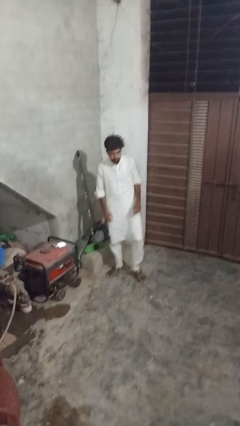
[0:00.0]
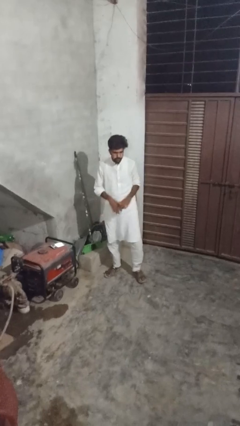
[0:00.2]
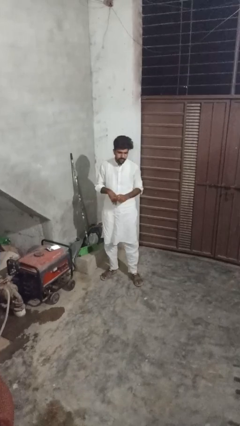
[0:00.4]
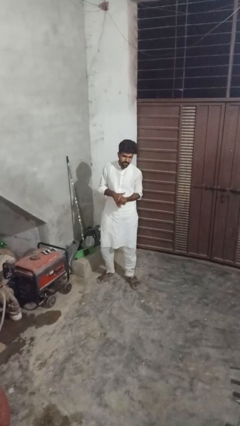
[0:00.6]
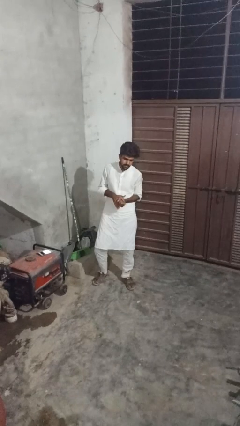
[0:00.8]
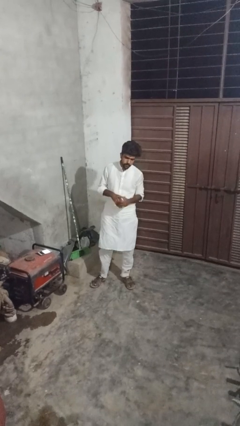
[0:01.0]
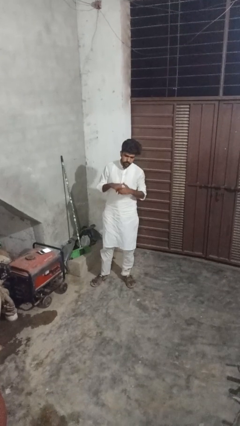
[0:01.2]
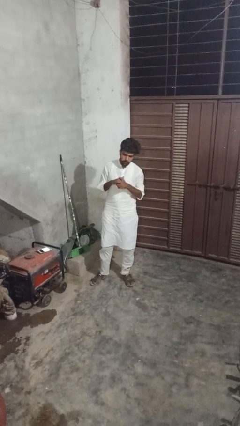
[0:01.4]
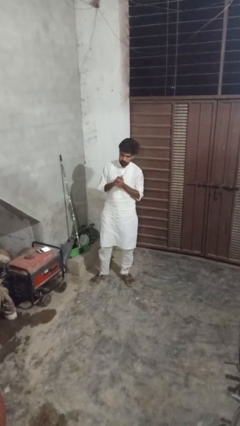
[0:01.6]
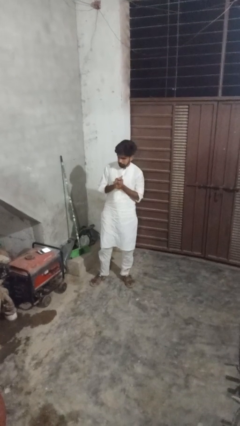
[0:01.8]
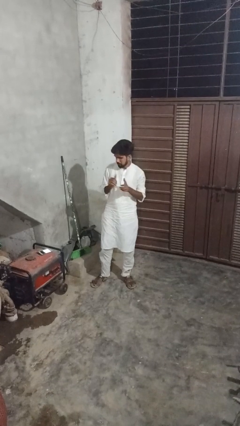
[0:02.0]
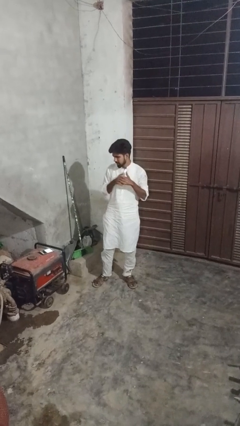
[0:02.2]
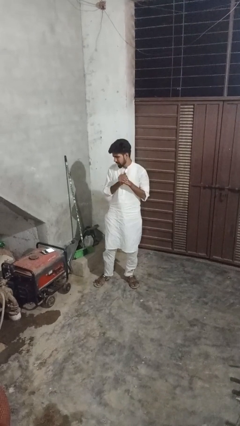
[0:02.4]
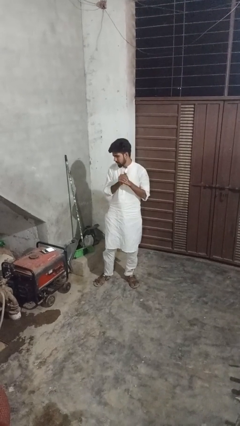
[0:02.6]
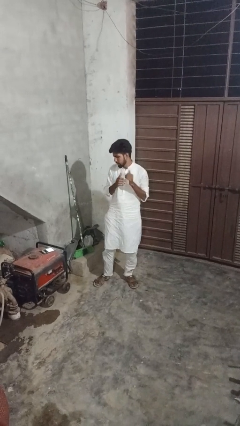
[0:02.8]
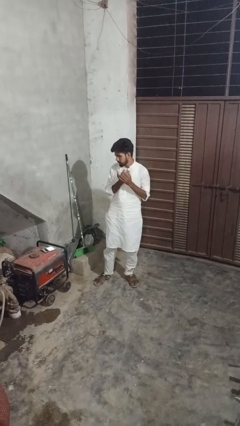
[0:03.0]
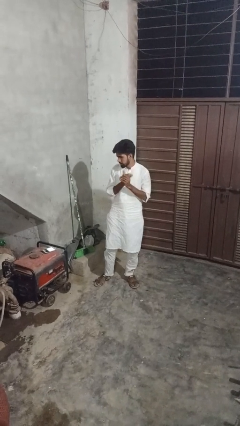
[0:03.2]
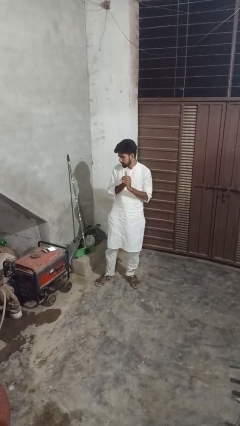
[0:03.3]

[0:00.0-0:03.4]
person cracks knuckles

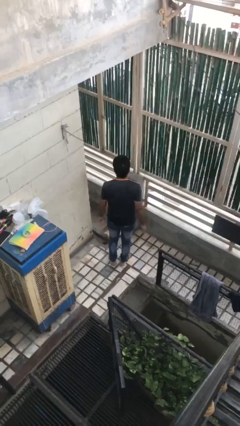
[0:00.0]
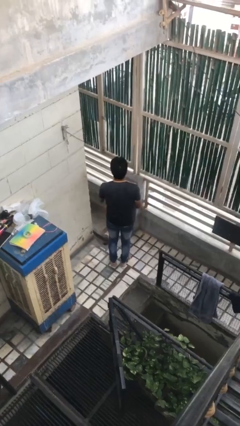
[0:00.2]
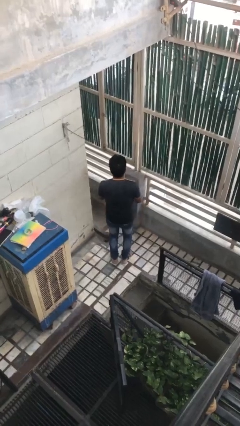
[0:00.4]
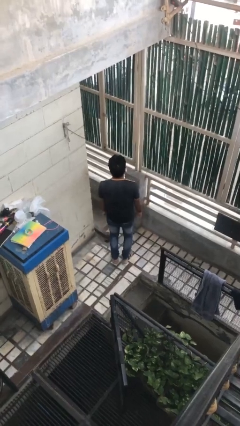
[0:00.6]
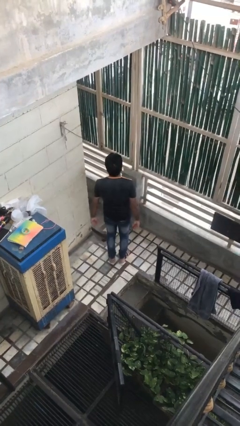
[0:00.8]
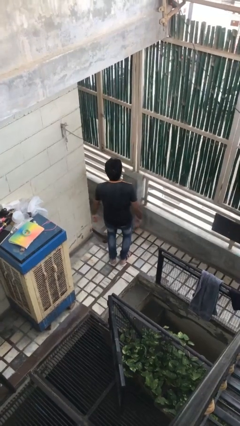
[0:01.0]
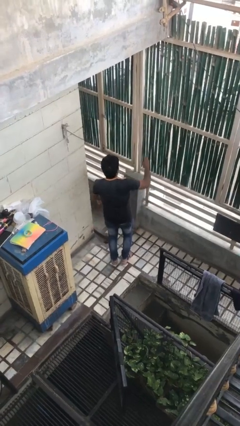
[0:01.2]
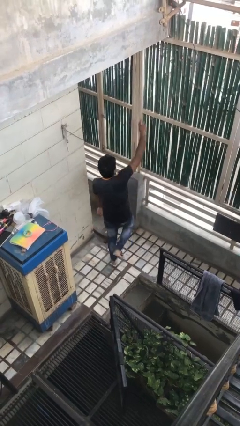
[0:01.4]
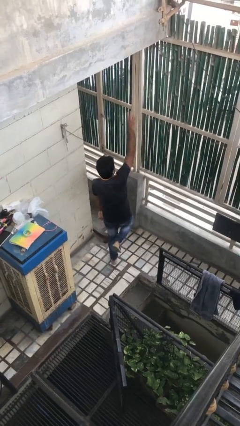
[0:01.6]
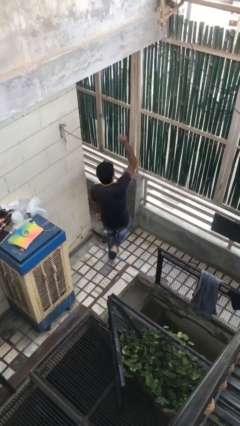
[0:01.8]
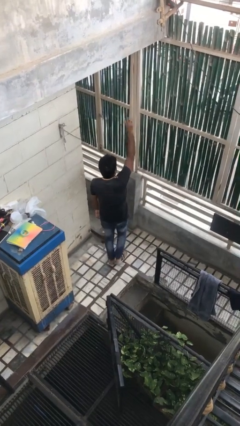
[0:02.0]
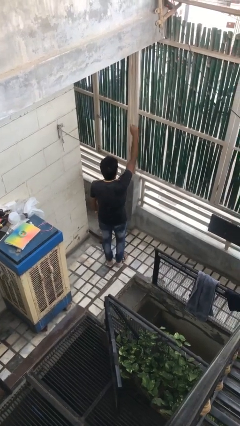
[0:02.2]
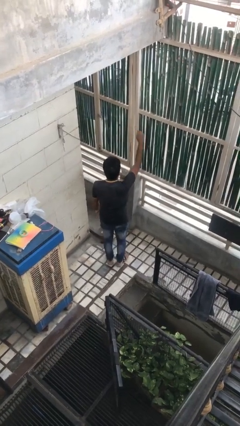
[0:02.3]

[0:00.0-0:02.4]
person dances in place

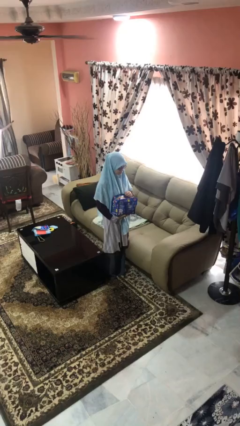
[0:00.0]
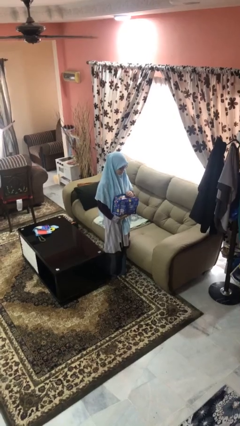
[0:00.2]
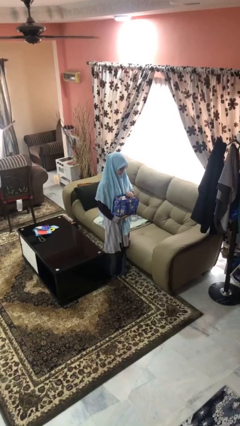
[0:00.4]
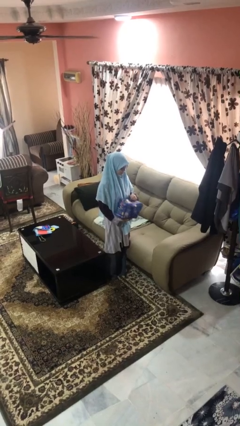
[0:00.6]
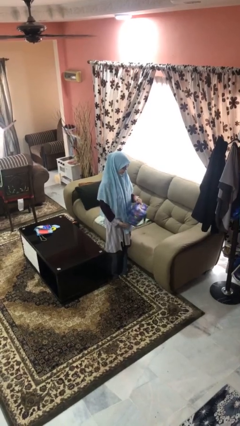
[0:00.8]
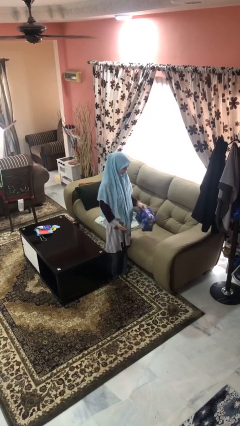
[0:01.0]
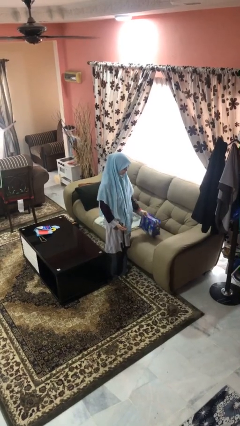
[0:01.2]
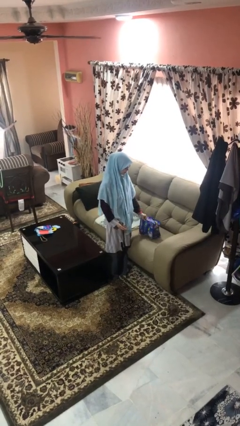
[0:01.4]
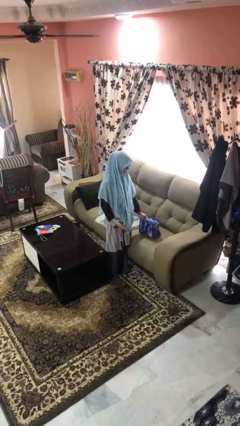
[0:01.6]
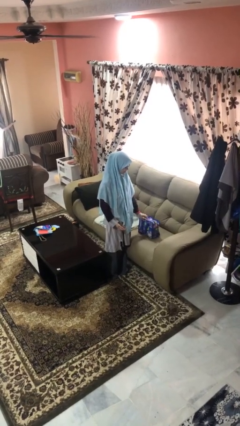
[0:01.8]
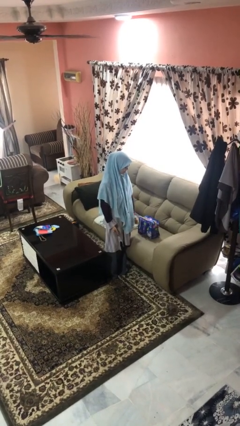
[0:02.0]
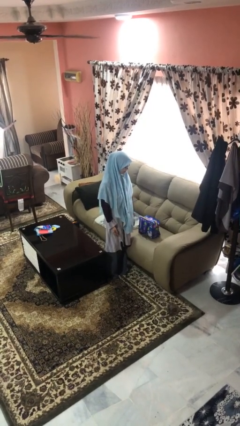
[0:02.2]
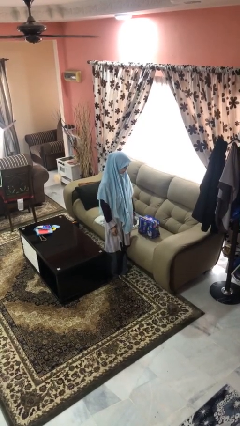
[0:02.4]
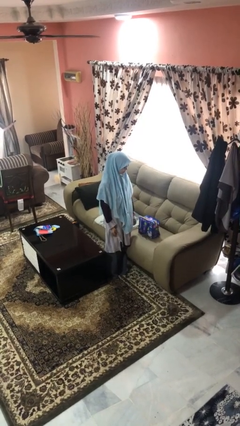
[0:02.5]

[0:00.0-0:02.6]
person puts down object on couch

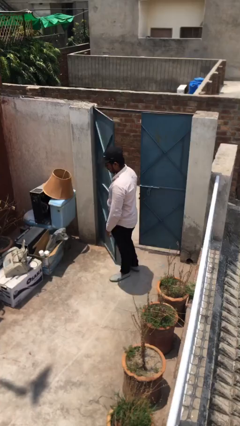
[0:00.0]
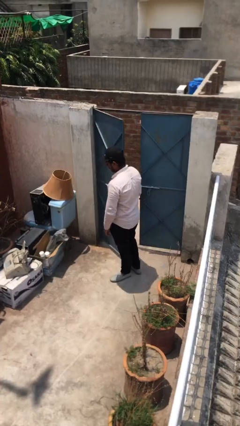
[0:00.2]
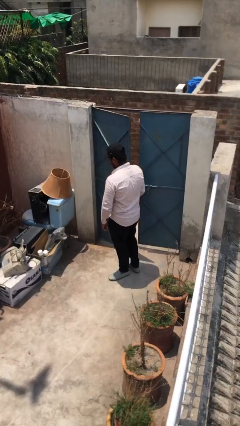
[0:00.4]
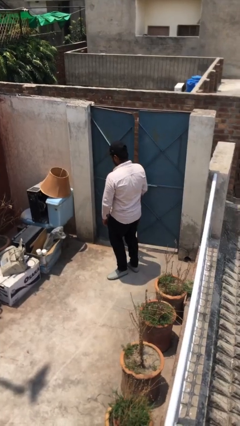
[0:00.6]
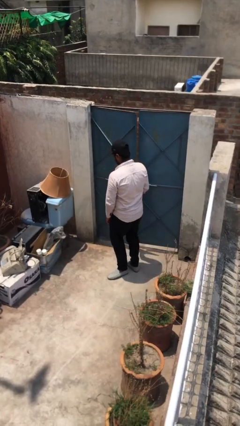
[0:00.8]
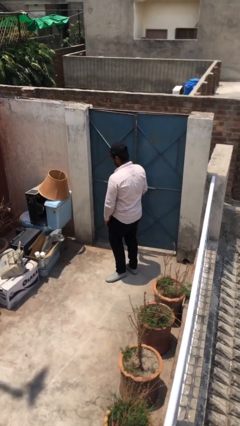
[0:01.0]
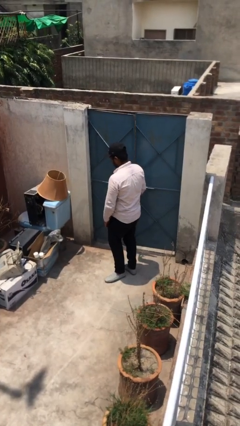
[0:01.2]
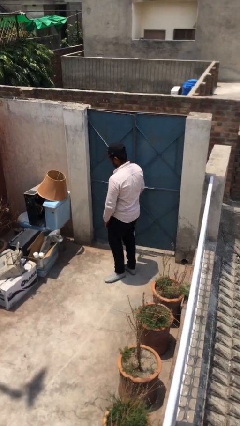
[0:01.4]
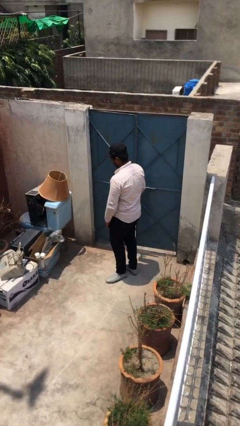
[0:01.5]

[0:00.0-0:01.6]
person closes facility door

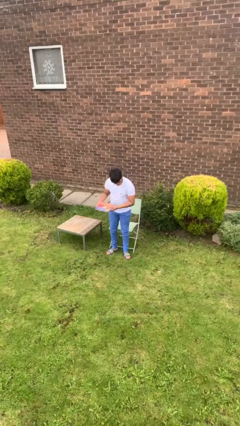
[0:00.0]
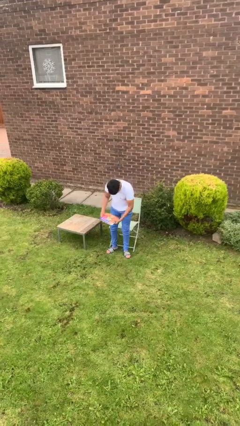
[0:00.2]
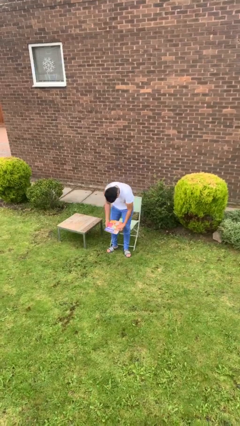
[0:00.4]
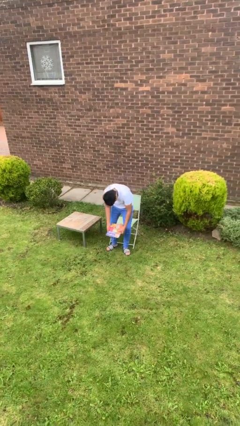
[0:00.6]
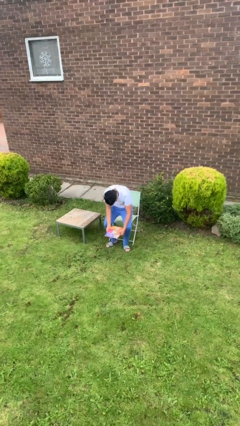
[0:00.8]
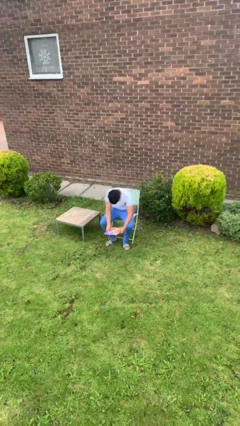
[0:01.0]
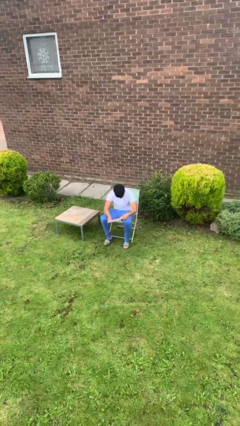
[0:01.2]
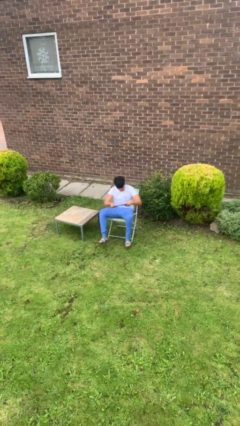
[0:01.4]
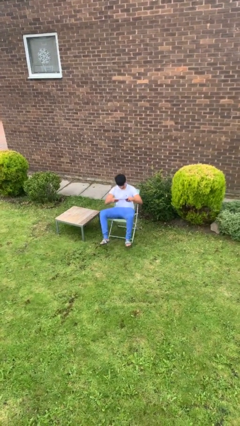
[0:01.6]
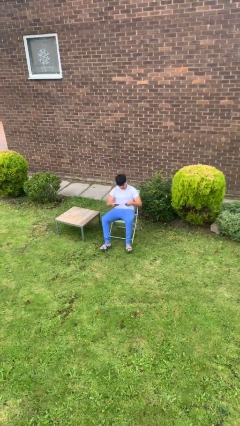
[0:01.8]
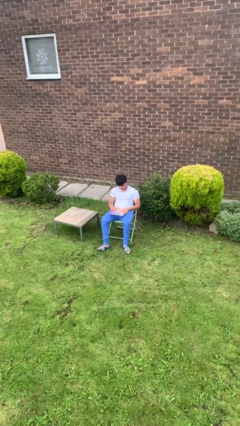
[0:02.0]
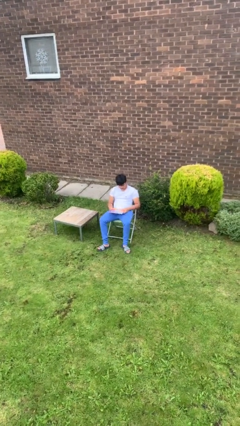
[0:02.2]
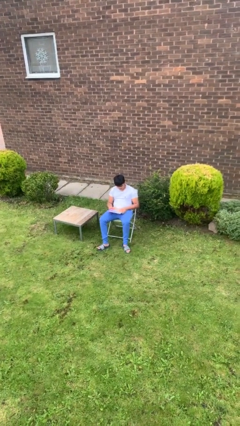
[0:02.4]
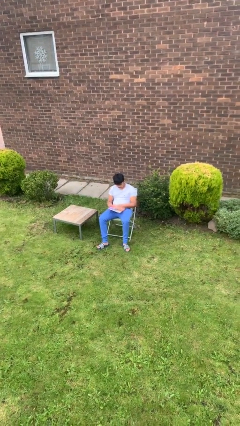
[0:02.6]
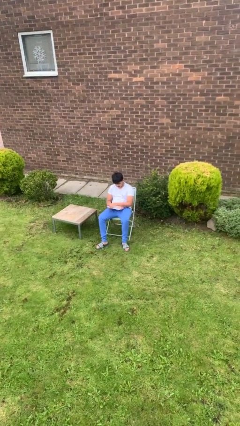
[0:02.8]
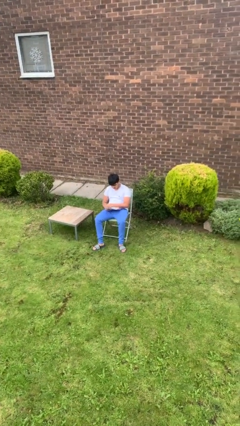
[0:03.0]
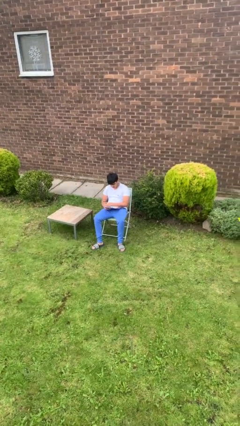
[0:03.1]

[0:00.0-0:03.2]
person sits down

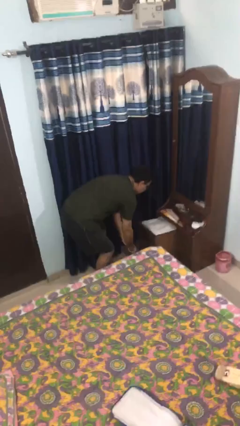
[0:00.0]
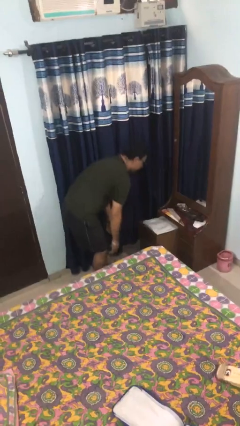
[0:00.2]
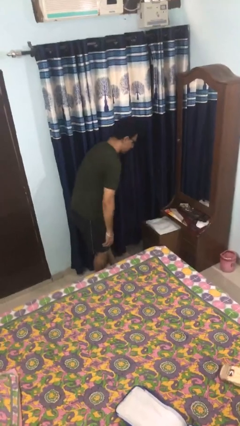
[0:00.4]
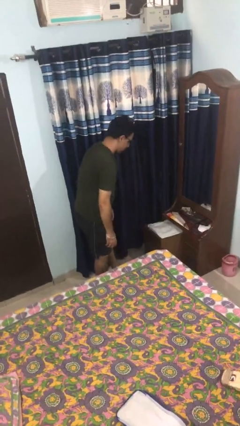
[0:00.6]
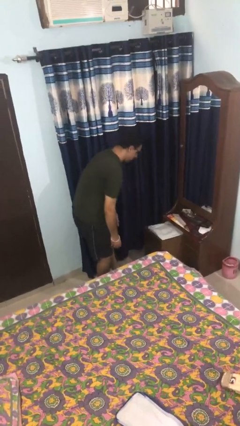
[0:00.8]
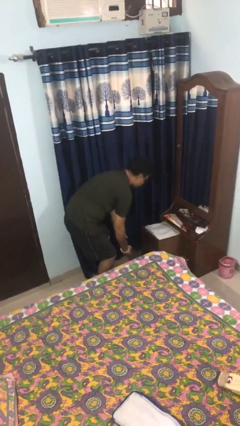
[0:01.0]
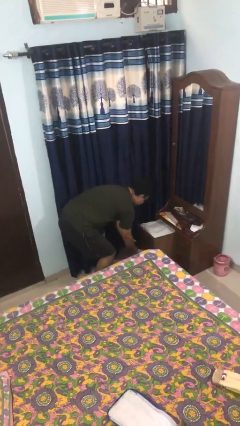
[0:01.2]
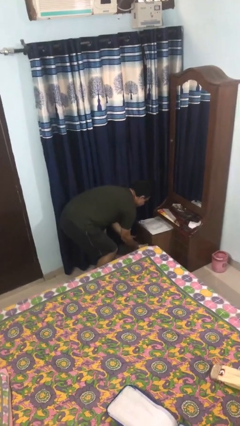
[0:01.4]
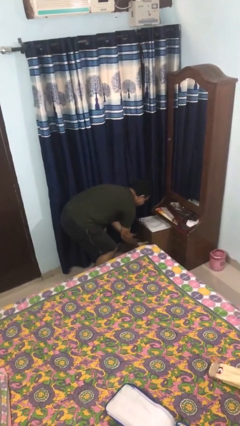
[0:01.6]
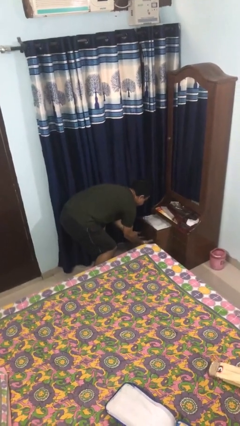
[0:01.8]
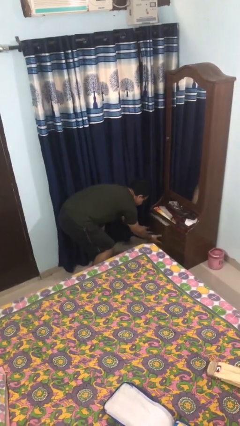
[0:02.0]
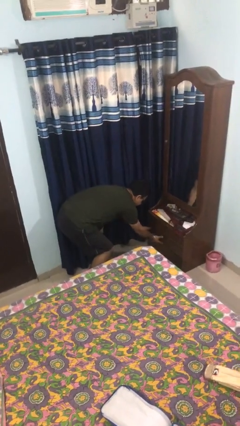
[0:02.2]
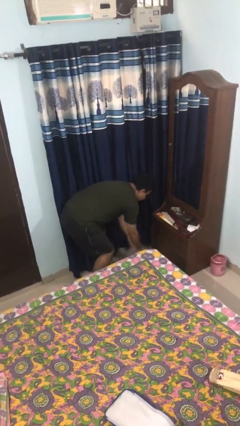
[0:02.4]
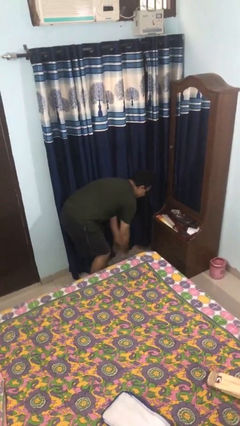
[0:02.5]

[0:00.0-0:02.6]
person closes dresser drawer

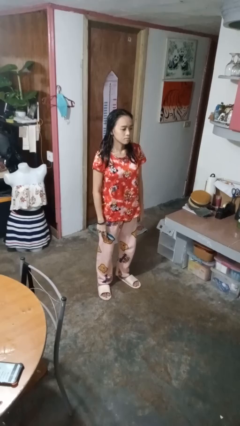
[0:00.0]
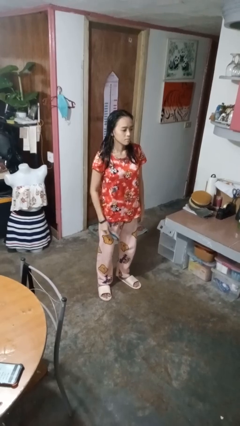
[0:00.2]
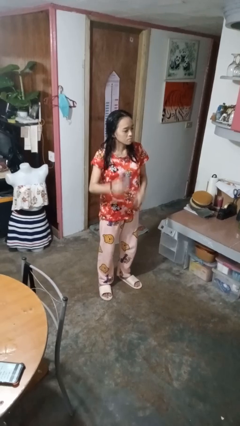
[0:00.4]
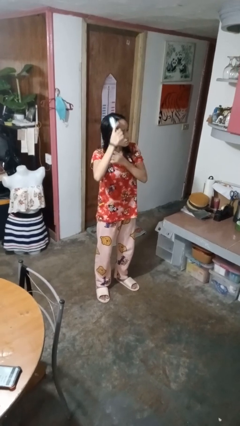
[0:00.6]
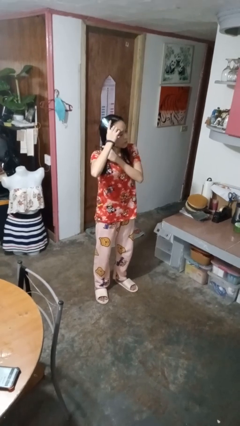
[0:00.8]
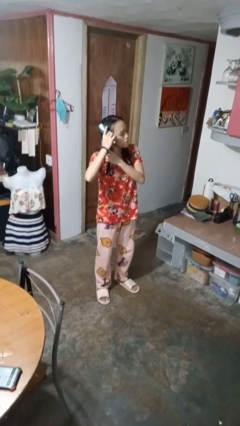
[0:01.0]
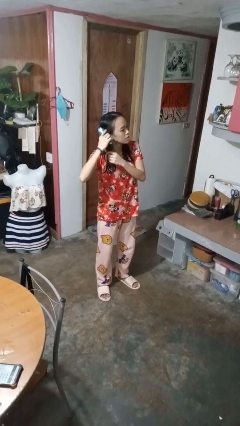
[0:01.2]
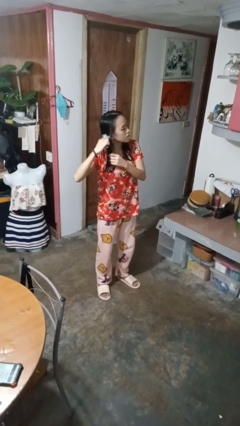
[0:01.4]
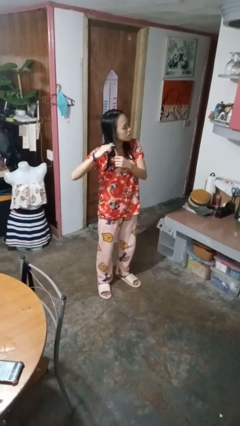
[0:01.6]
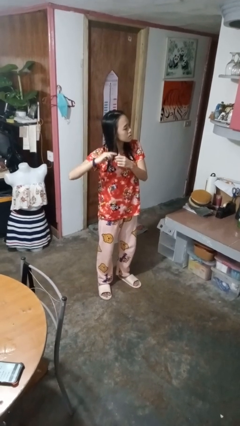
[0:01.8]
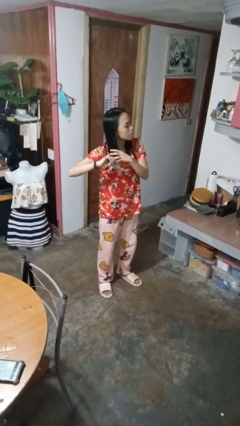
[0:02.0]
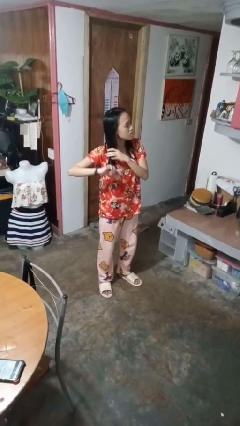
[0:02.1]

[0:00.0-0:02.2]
person brushes hair
